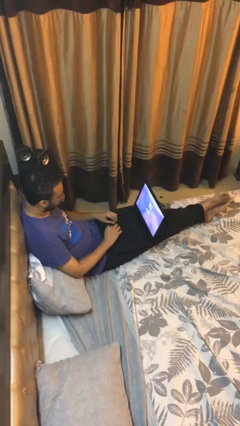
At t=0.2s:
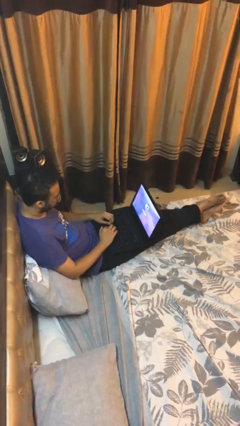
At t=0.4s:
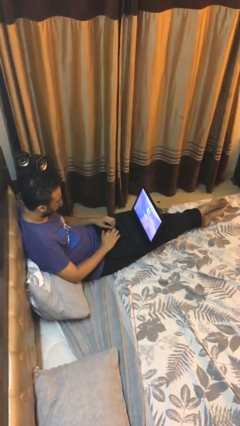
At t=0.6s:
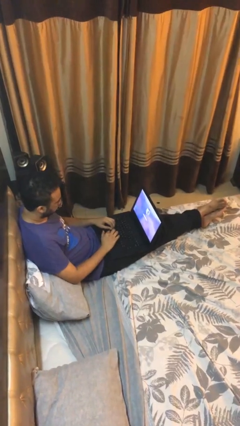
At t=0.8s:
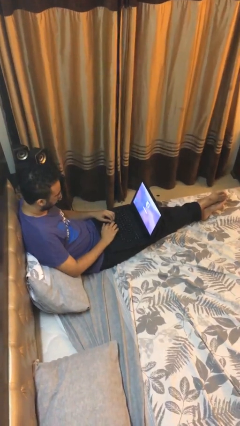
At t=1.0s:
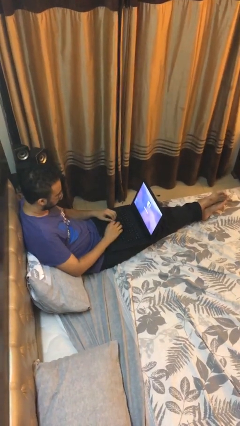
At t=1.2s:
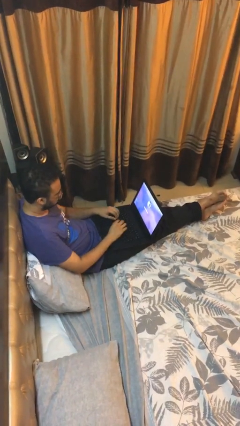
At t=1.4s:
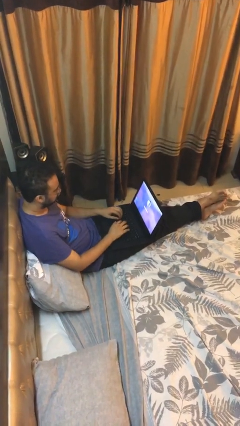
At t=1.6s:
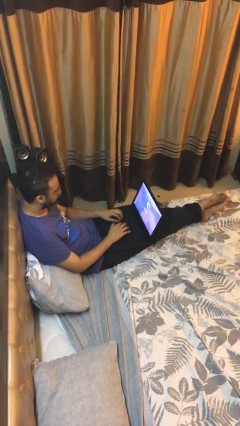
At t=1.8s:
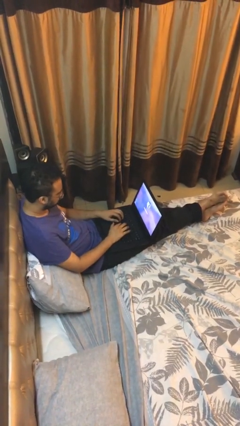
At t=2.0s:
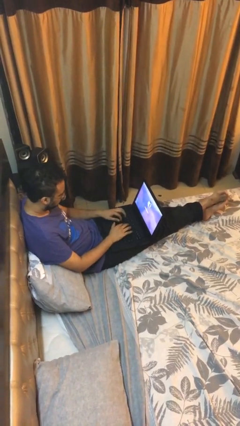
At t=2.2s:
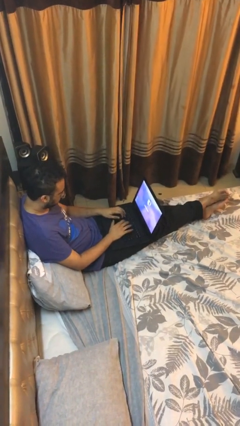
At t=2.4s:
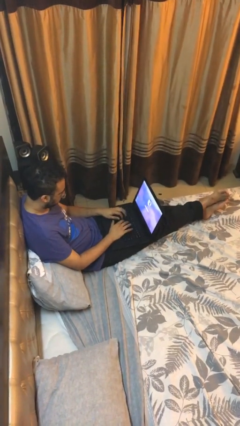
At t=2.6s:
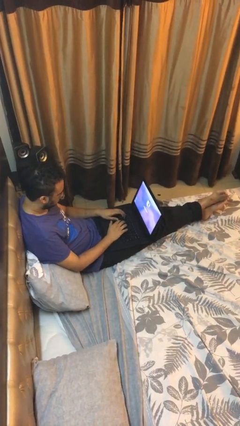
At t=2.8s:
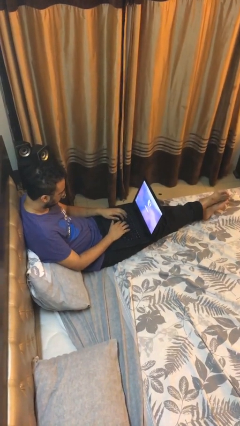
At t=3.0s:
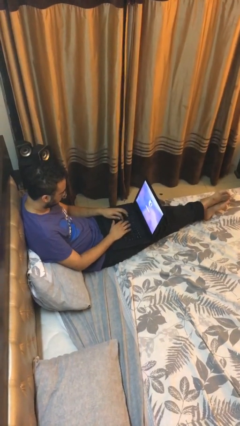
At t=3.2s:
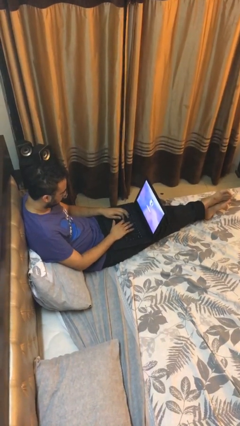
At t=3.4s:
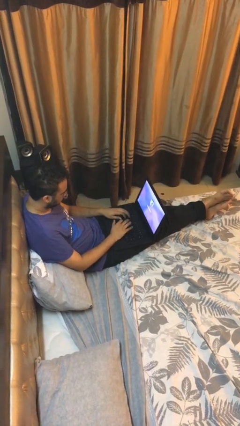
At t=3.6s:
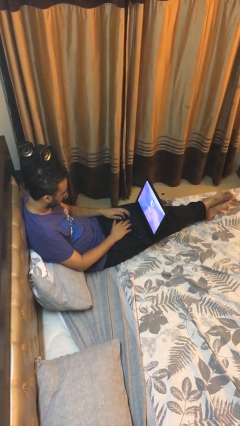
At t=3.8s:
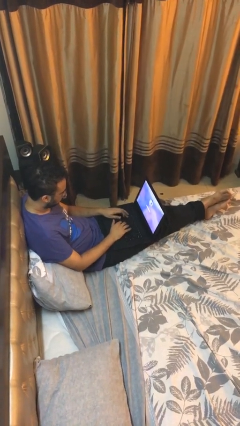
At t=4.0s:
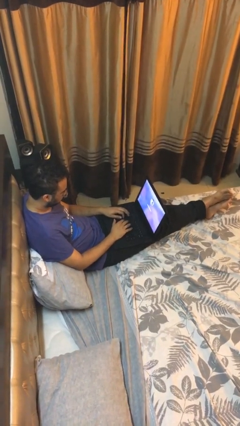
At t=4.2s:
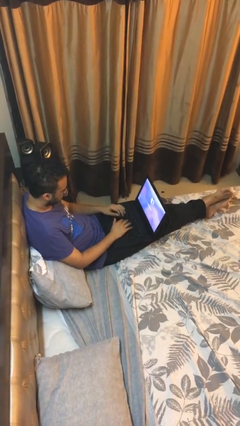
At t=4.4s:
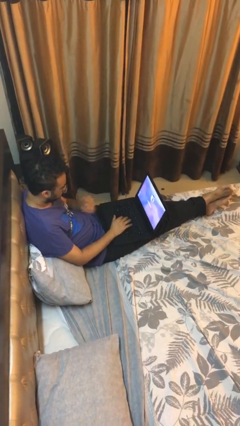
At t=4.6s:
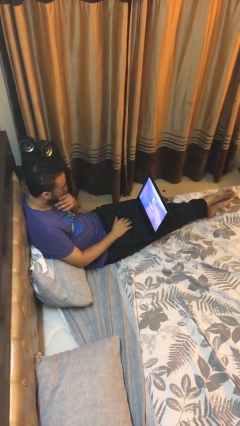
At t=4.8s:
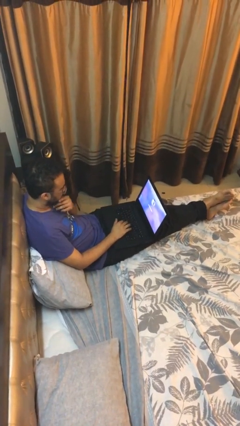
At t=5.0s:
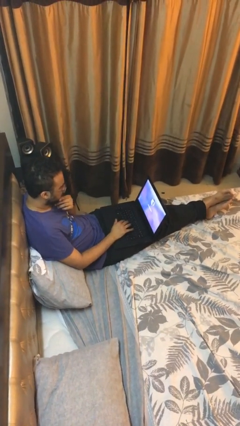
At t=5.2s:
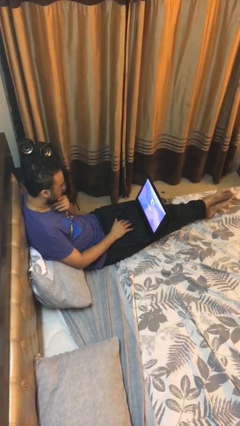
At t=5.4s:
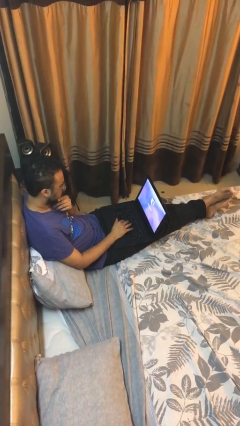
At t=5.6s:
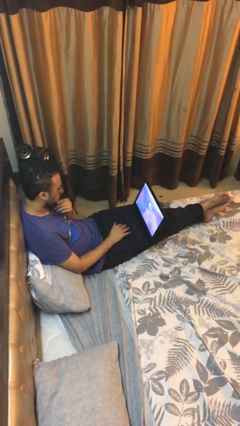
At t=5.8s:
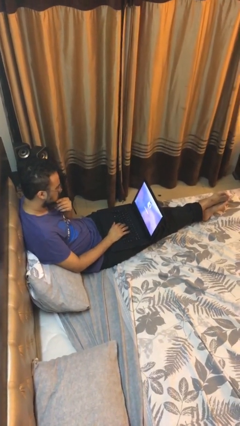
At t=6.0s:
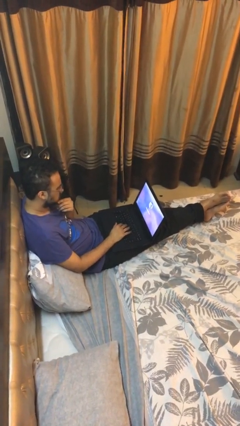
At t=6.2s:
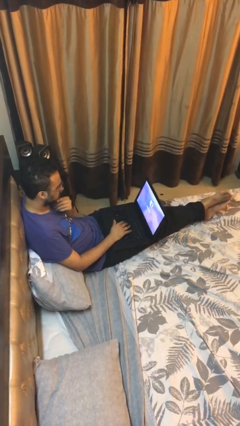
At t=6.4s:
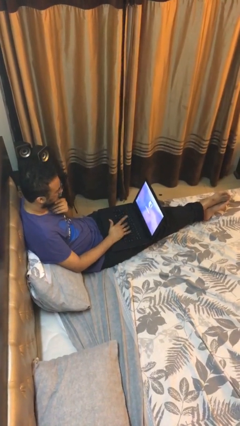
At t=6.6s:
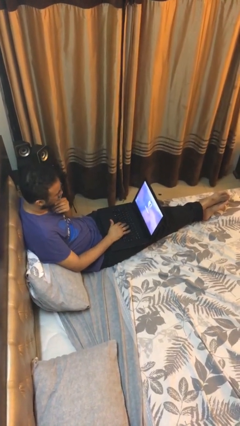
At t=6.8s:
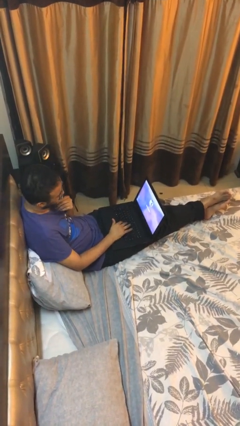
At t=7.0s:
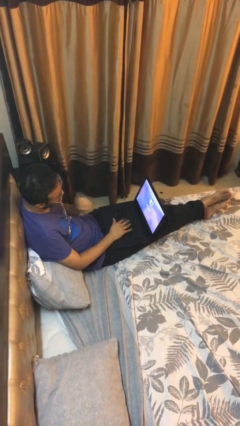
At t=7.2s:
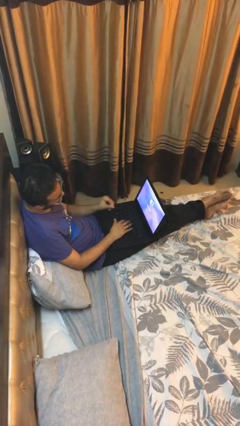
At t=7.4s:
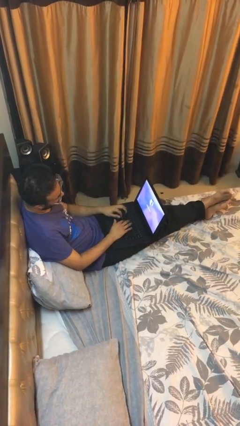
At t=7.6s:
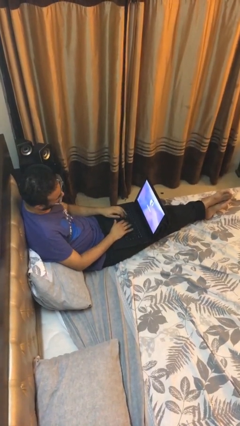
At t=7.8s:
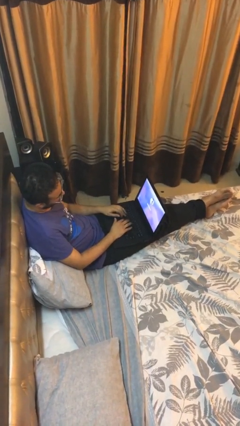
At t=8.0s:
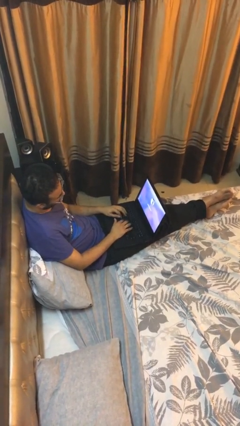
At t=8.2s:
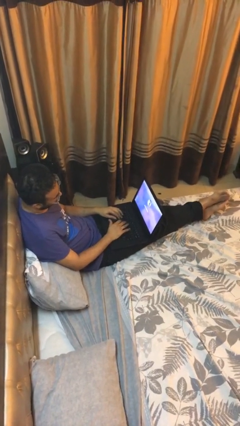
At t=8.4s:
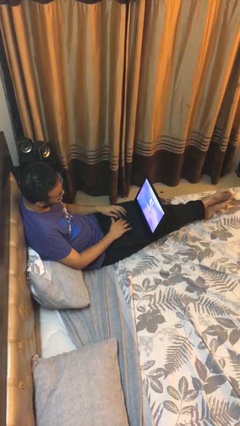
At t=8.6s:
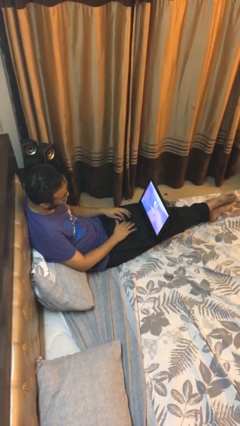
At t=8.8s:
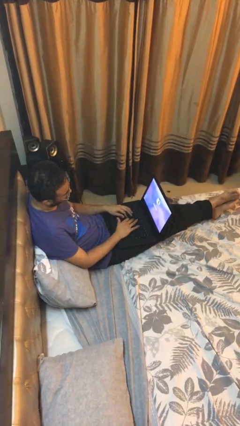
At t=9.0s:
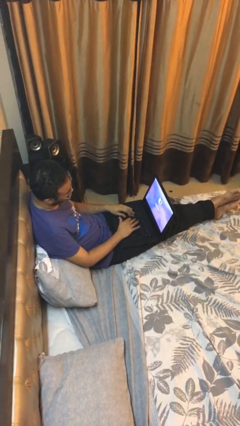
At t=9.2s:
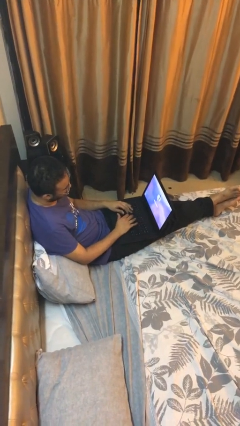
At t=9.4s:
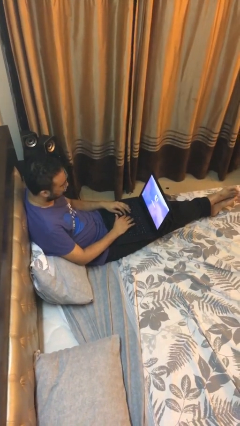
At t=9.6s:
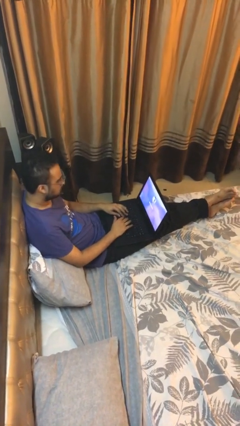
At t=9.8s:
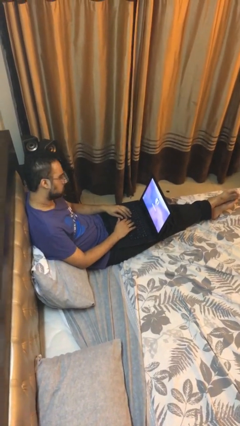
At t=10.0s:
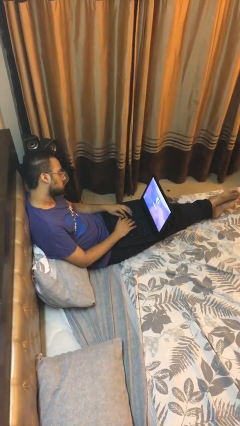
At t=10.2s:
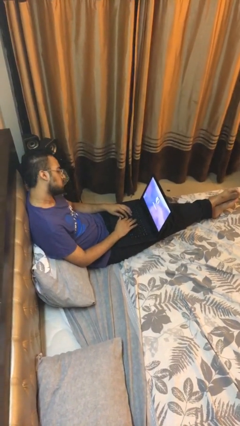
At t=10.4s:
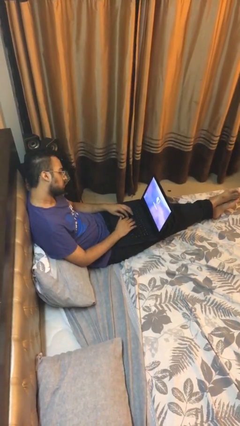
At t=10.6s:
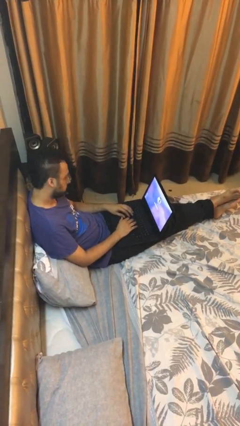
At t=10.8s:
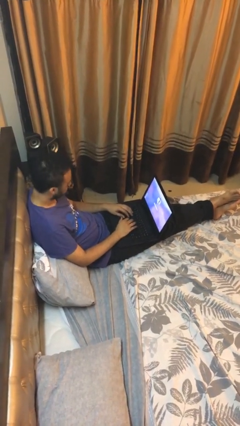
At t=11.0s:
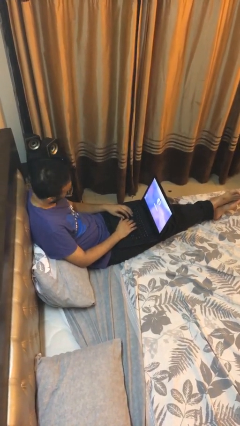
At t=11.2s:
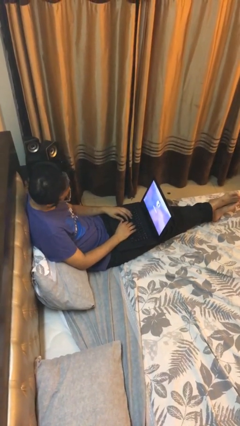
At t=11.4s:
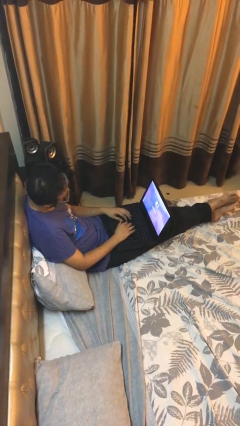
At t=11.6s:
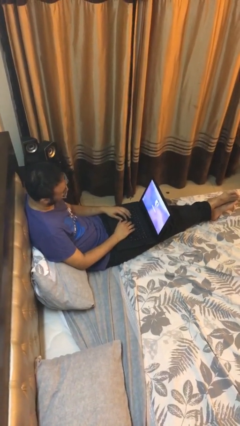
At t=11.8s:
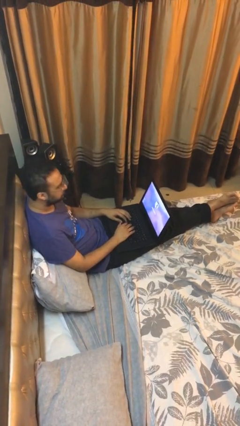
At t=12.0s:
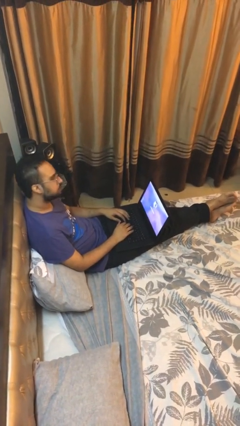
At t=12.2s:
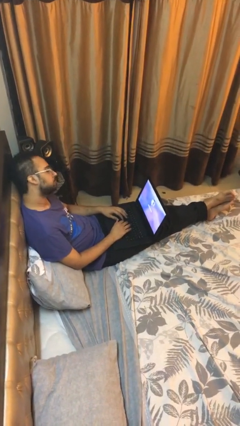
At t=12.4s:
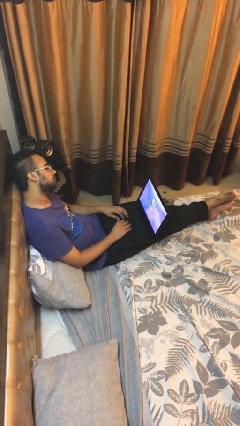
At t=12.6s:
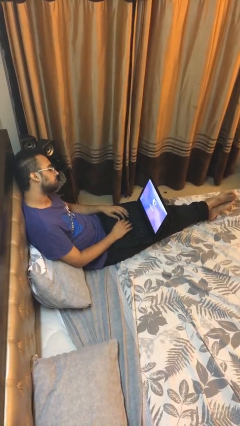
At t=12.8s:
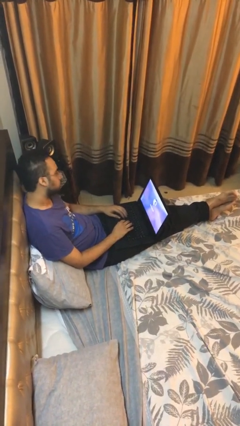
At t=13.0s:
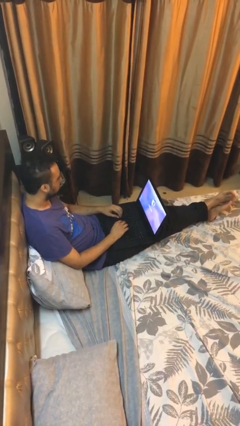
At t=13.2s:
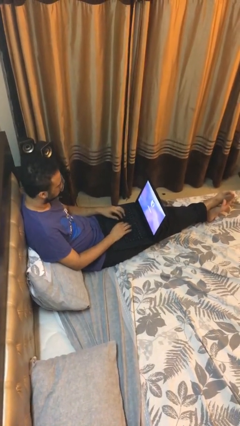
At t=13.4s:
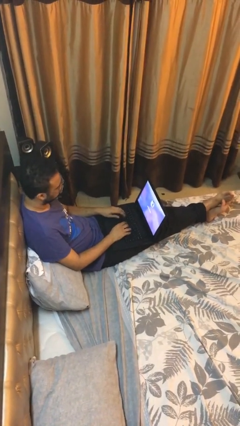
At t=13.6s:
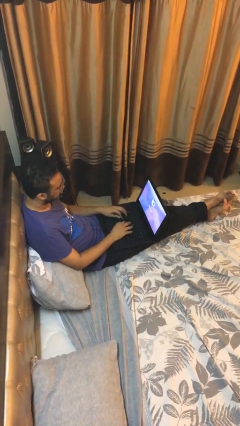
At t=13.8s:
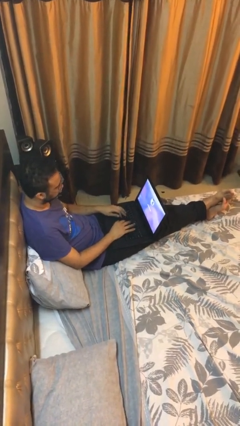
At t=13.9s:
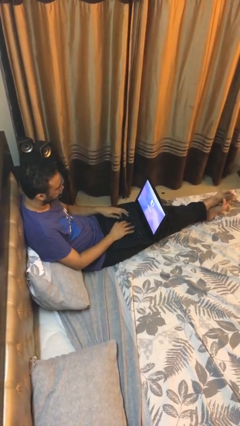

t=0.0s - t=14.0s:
person interacts with laptop

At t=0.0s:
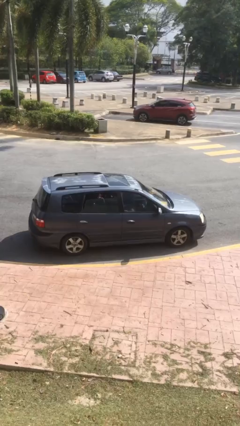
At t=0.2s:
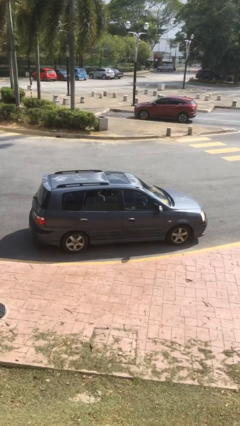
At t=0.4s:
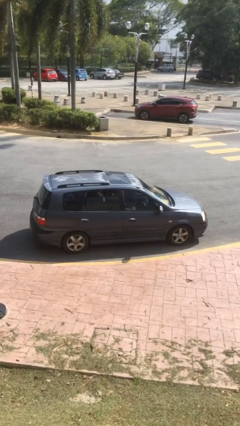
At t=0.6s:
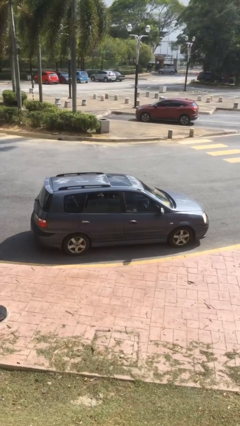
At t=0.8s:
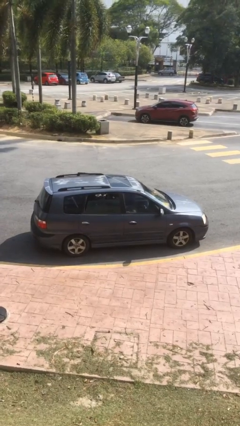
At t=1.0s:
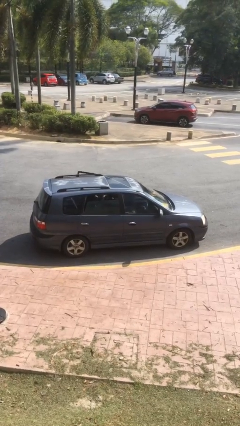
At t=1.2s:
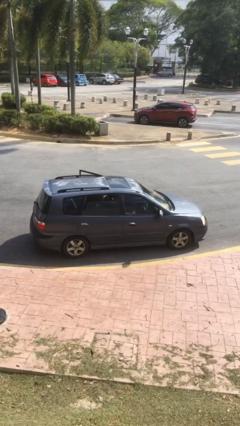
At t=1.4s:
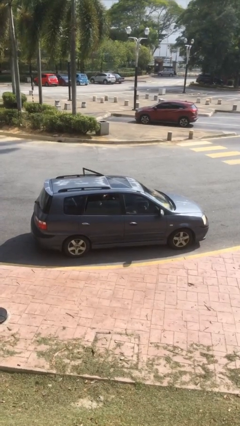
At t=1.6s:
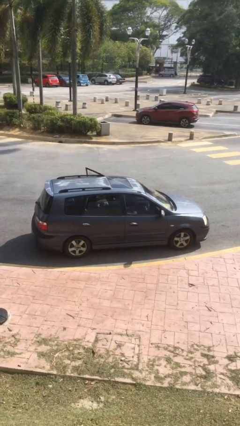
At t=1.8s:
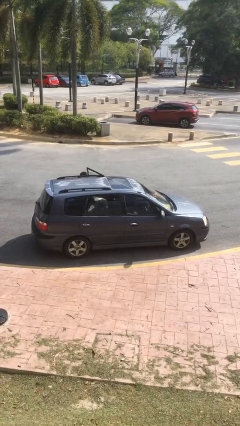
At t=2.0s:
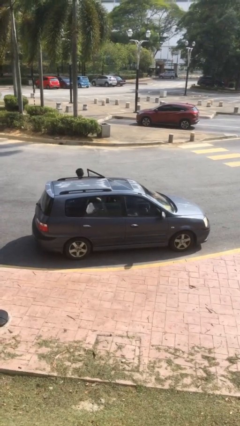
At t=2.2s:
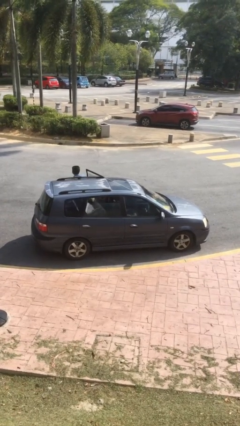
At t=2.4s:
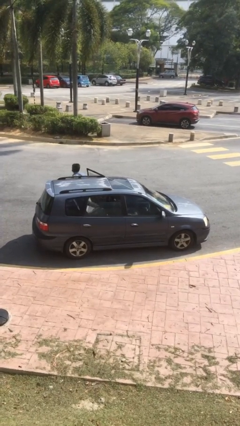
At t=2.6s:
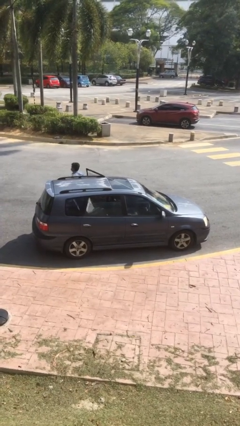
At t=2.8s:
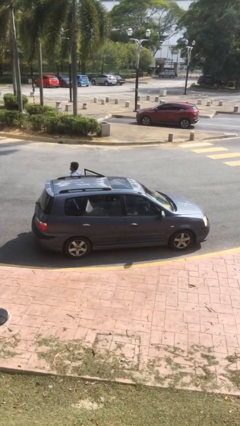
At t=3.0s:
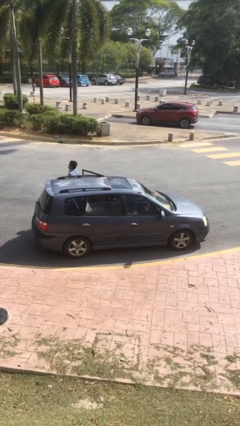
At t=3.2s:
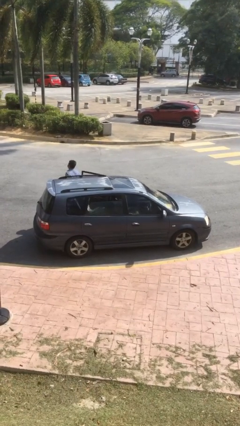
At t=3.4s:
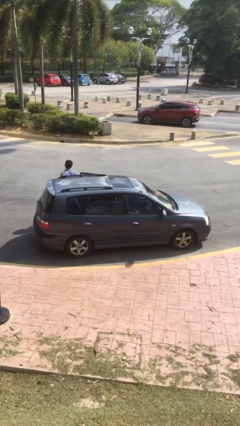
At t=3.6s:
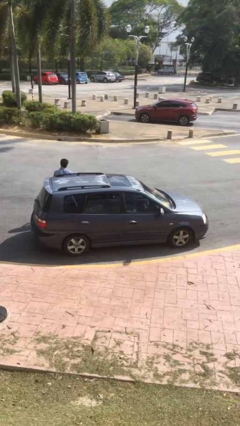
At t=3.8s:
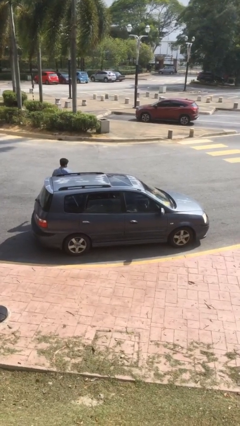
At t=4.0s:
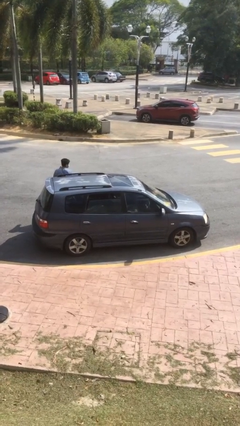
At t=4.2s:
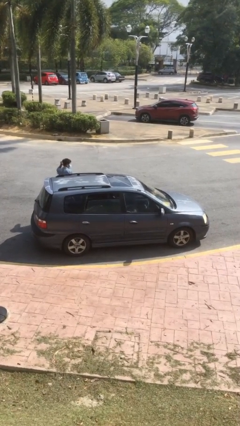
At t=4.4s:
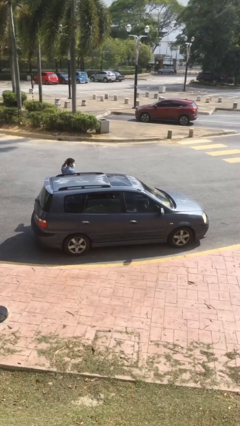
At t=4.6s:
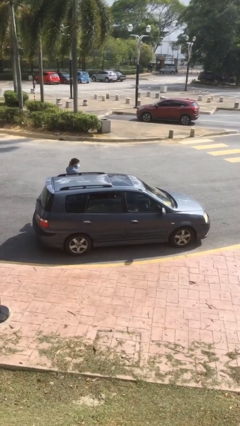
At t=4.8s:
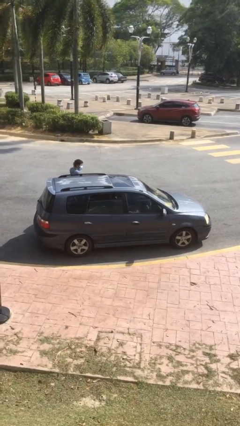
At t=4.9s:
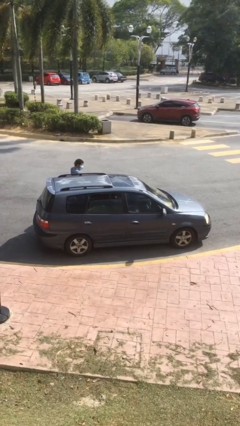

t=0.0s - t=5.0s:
car drops off person
